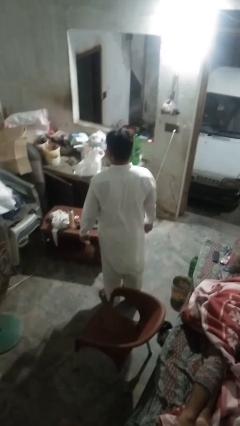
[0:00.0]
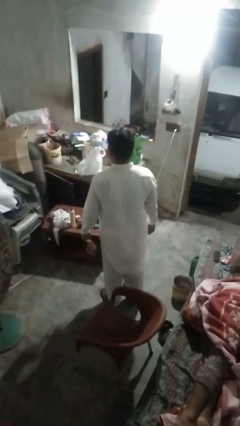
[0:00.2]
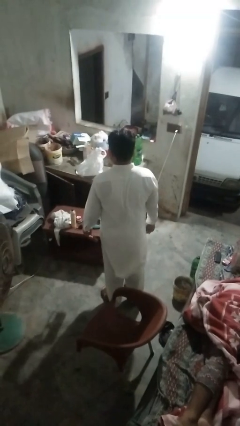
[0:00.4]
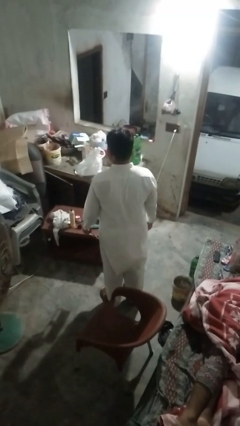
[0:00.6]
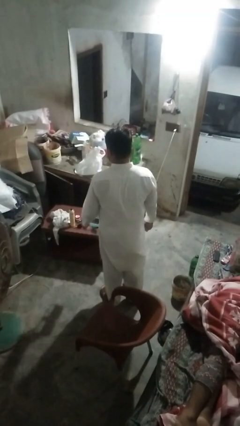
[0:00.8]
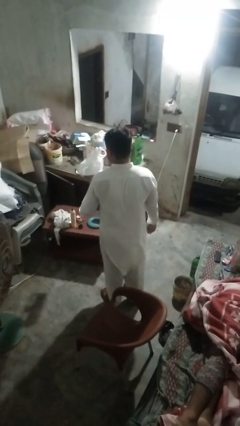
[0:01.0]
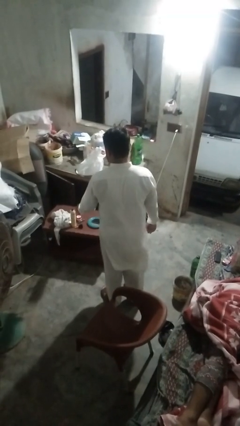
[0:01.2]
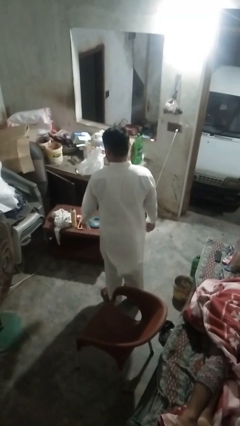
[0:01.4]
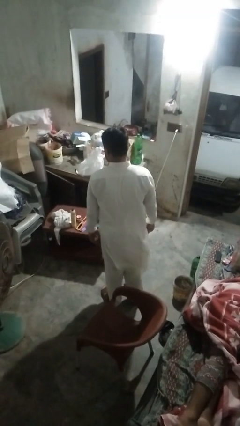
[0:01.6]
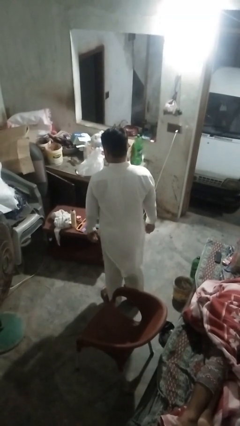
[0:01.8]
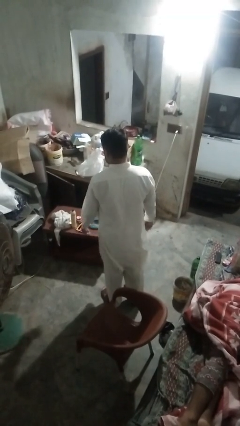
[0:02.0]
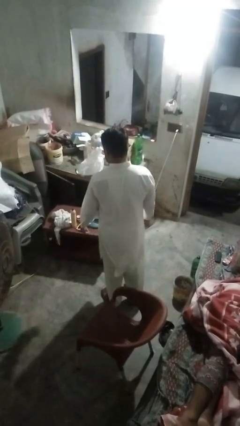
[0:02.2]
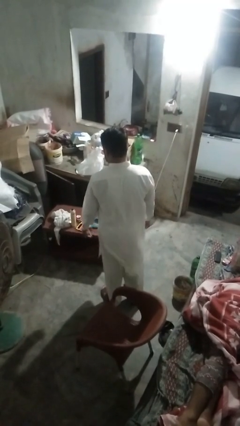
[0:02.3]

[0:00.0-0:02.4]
person throws object on table

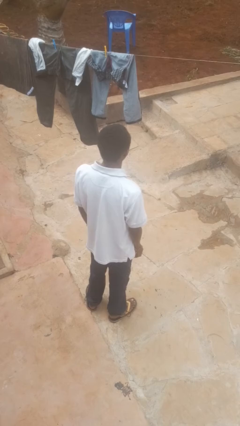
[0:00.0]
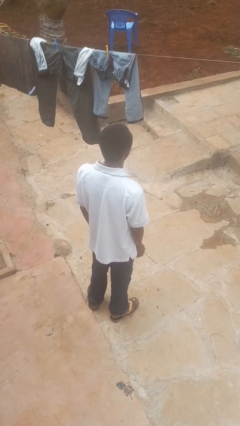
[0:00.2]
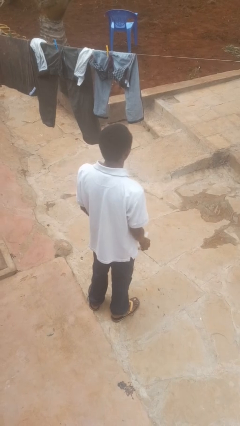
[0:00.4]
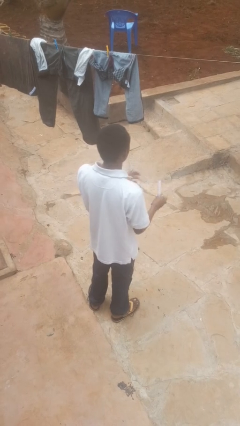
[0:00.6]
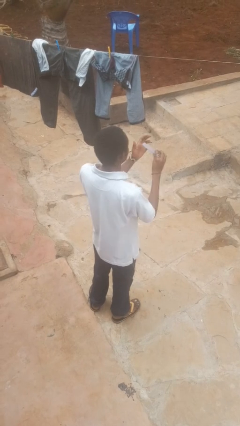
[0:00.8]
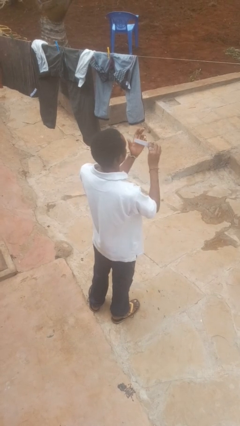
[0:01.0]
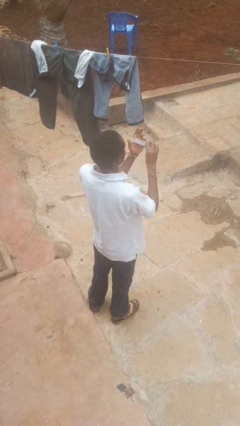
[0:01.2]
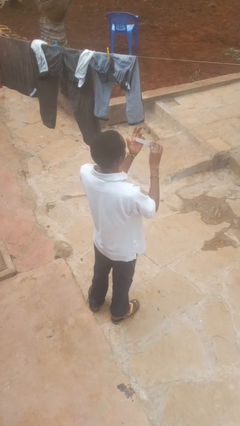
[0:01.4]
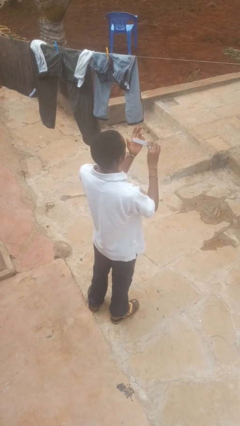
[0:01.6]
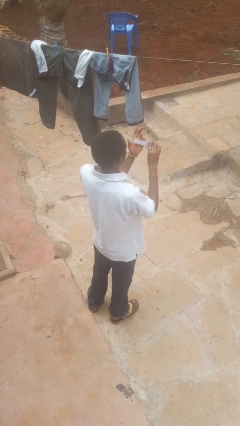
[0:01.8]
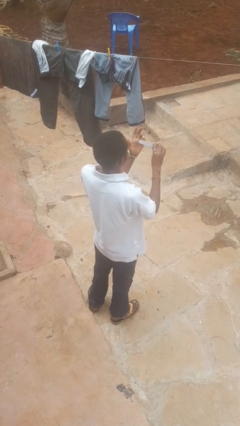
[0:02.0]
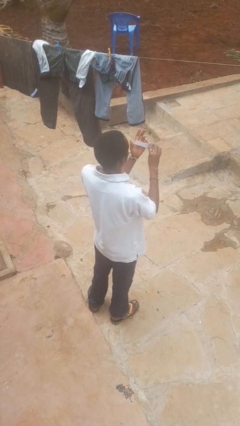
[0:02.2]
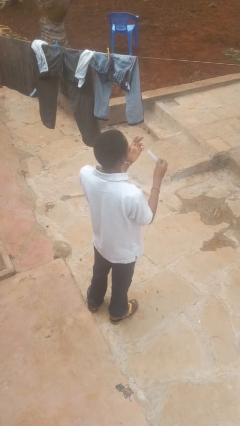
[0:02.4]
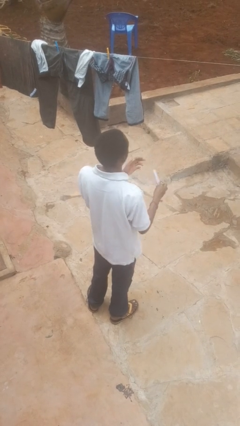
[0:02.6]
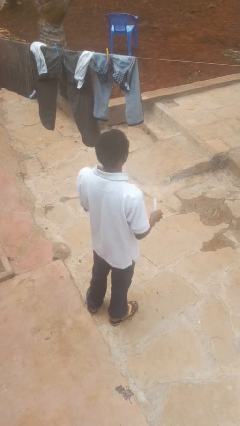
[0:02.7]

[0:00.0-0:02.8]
person files fingernails

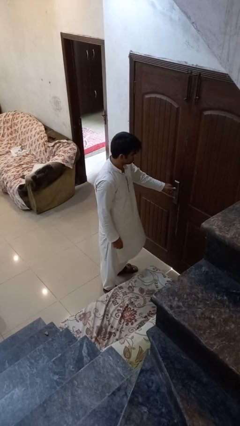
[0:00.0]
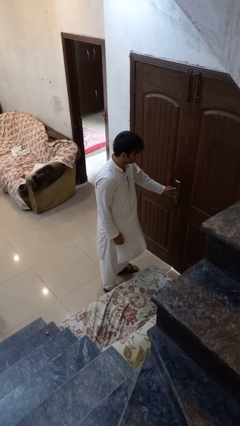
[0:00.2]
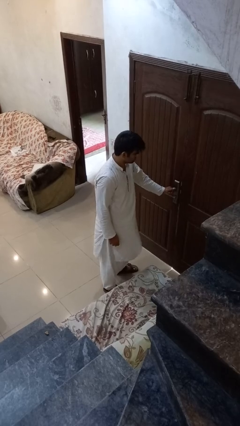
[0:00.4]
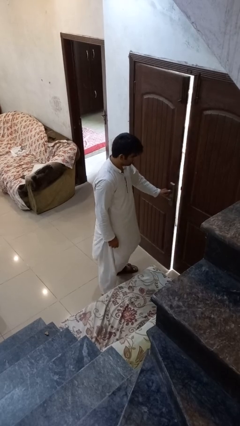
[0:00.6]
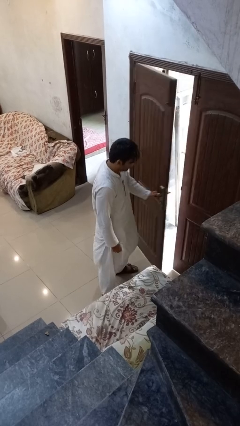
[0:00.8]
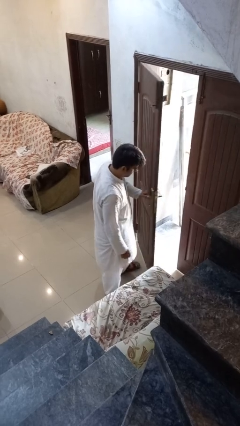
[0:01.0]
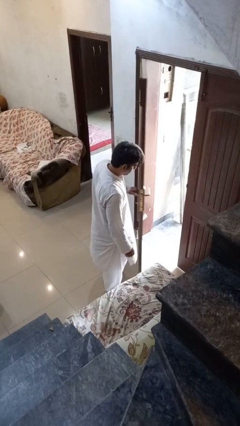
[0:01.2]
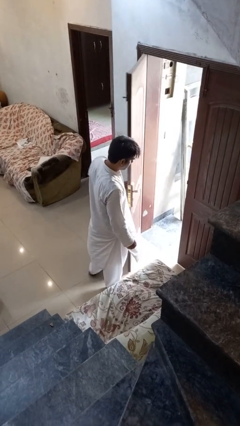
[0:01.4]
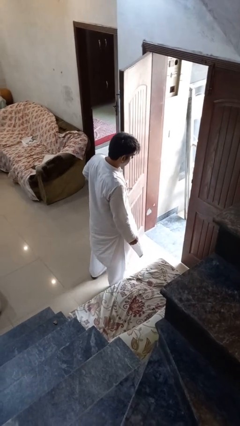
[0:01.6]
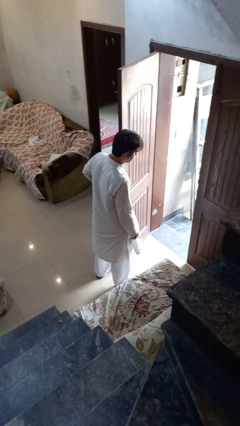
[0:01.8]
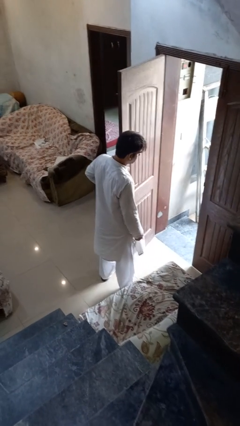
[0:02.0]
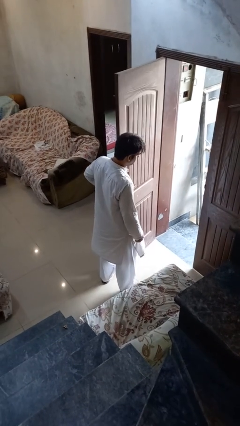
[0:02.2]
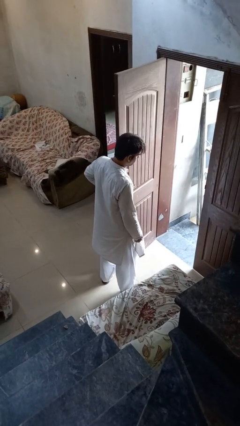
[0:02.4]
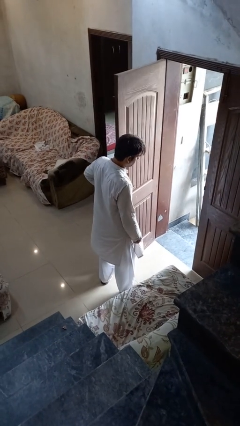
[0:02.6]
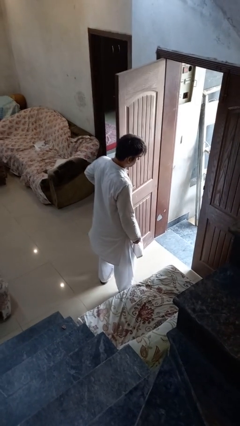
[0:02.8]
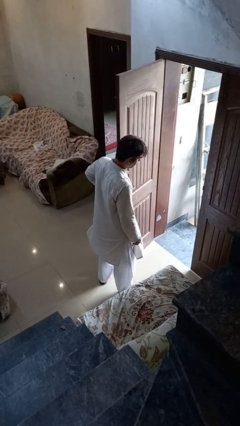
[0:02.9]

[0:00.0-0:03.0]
person opens facility door

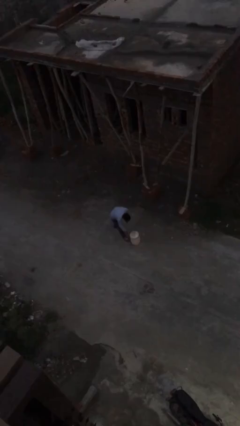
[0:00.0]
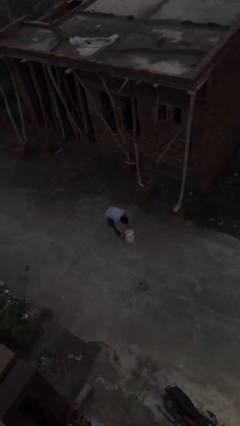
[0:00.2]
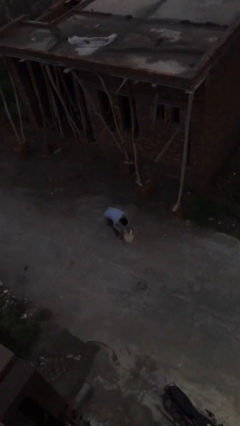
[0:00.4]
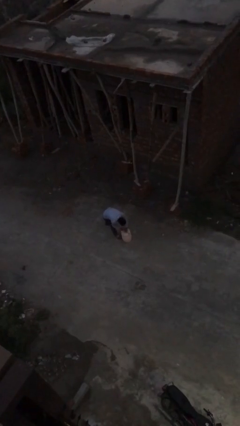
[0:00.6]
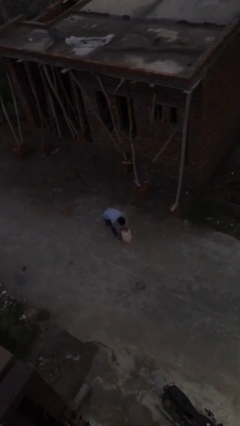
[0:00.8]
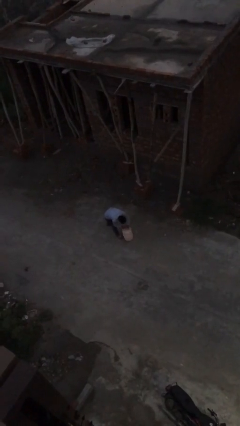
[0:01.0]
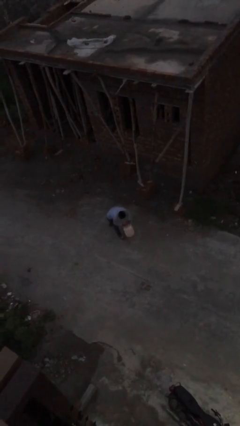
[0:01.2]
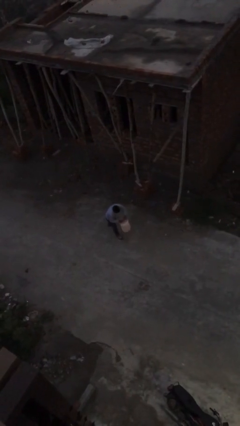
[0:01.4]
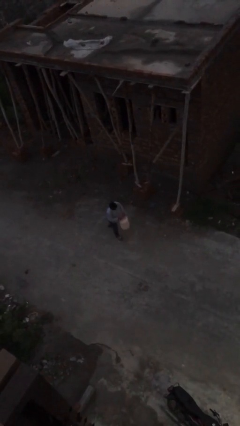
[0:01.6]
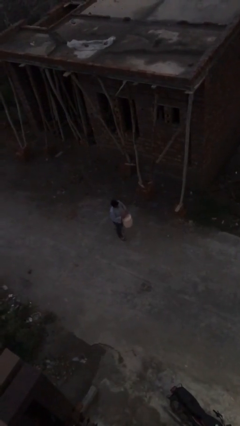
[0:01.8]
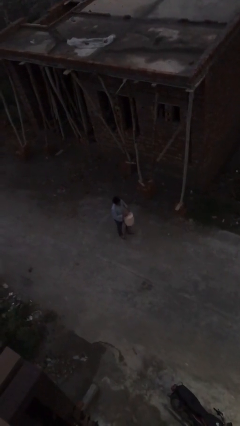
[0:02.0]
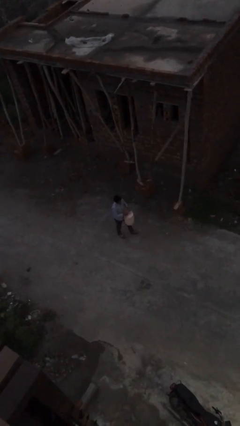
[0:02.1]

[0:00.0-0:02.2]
person picks up object from floor

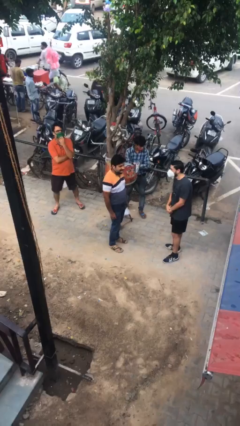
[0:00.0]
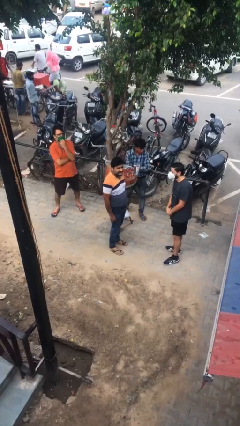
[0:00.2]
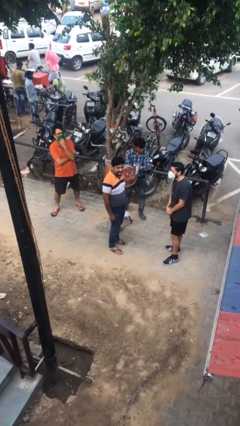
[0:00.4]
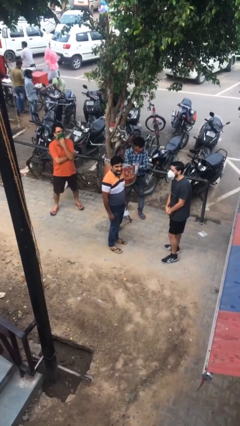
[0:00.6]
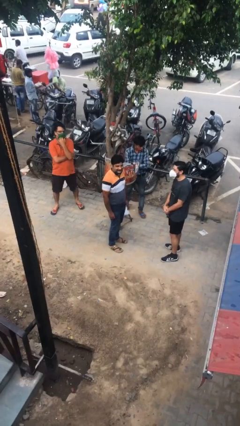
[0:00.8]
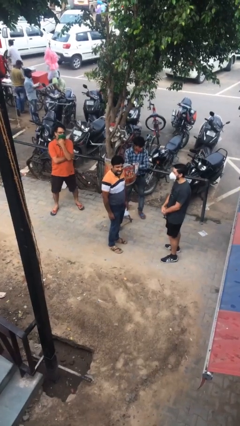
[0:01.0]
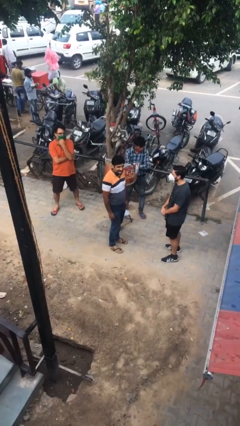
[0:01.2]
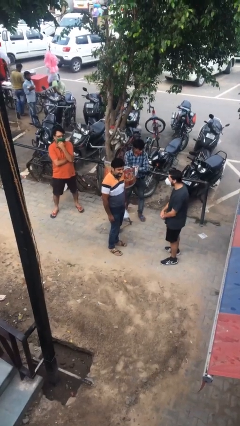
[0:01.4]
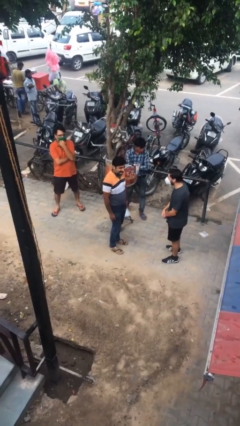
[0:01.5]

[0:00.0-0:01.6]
person laughs with person

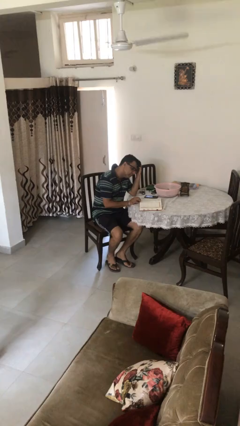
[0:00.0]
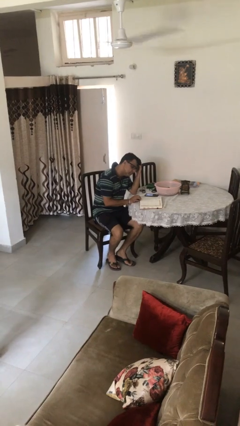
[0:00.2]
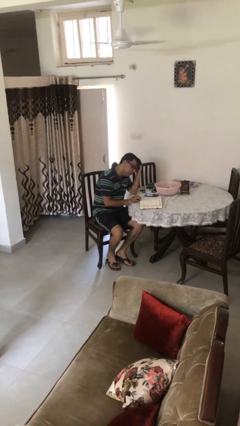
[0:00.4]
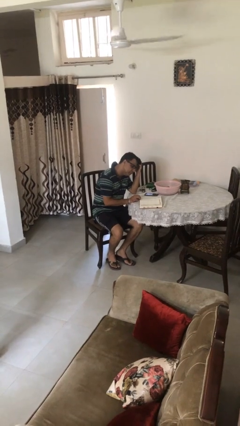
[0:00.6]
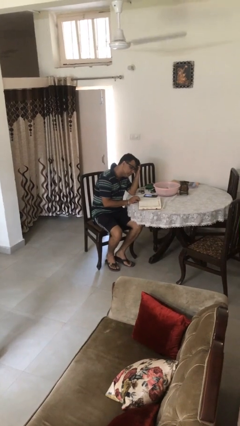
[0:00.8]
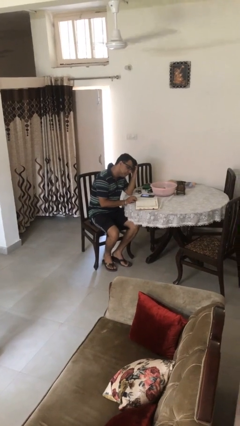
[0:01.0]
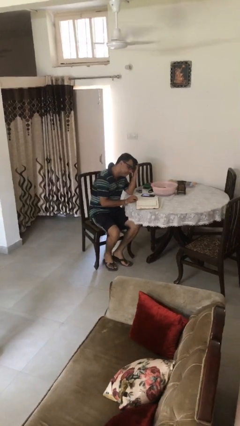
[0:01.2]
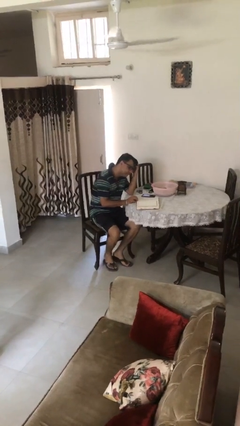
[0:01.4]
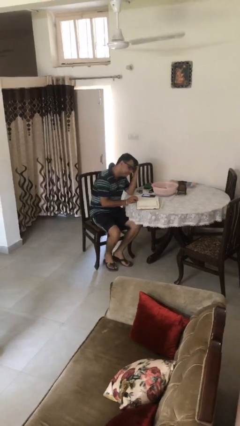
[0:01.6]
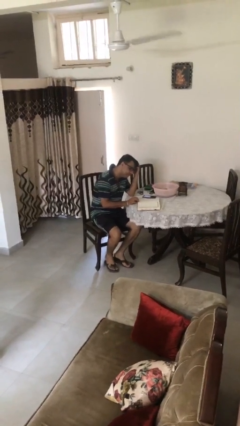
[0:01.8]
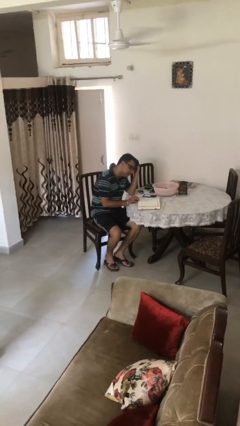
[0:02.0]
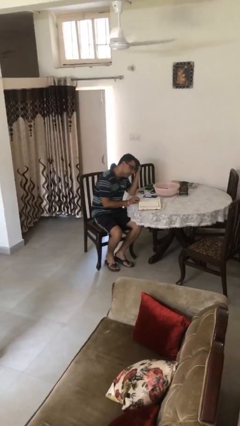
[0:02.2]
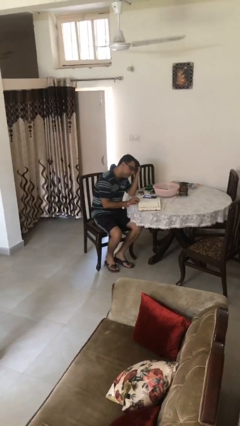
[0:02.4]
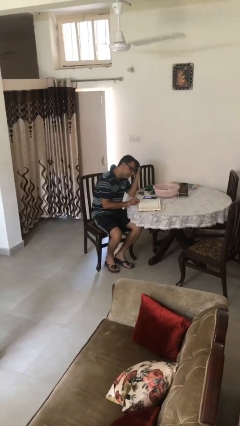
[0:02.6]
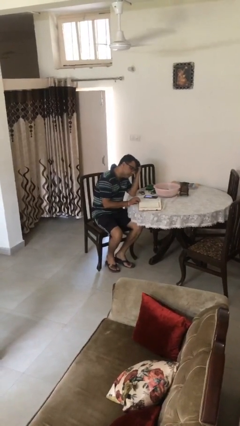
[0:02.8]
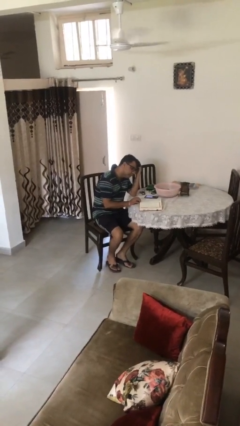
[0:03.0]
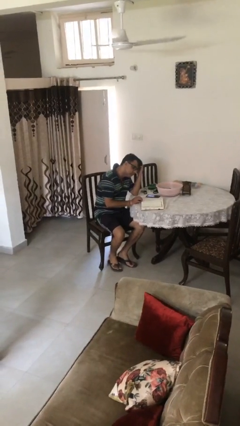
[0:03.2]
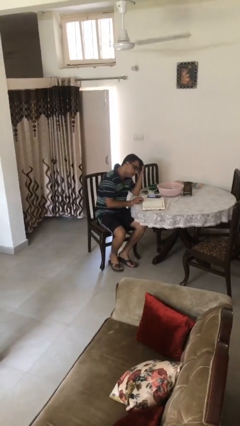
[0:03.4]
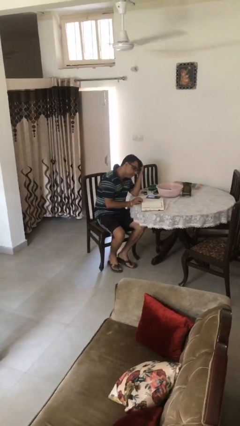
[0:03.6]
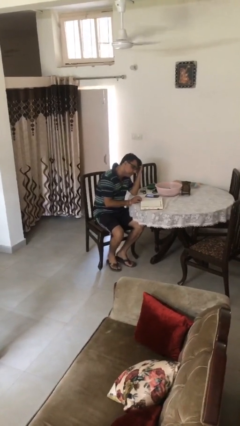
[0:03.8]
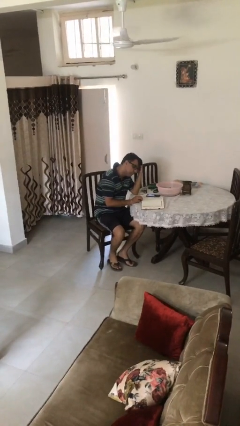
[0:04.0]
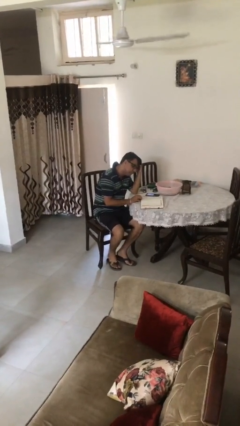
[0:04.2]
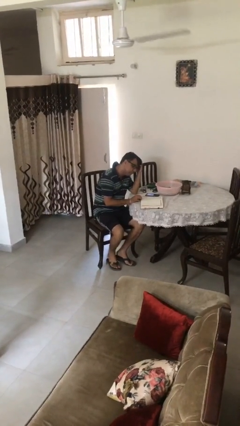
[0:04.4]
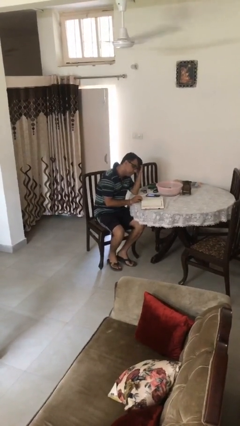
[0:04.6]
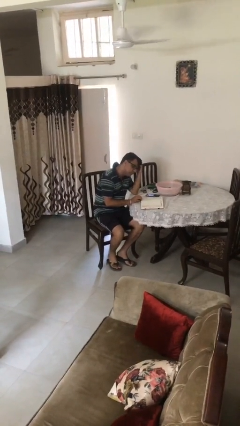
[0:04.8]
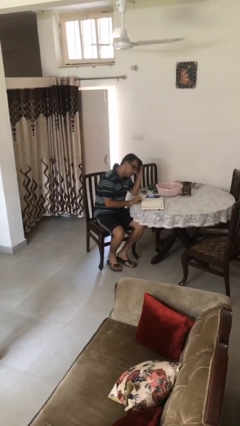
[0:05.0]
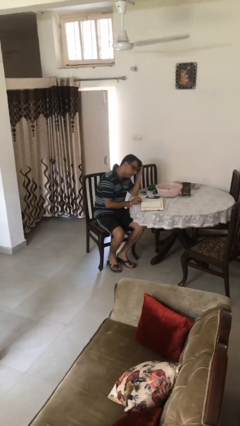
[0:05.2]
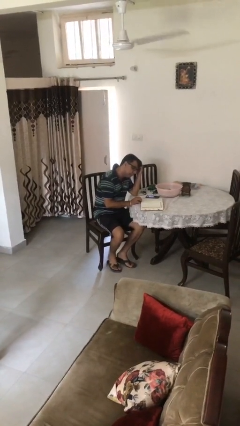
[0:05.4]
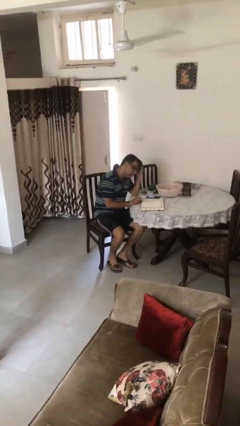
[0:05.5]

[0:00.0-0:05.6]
person reads document
